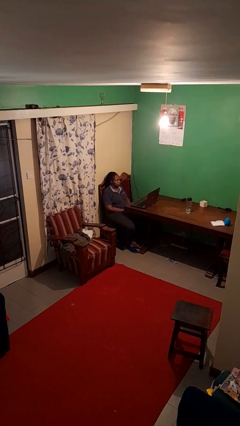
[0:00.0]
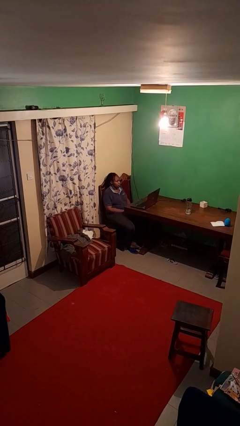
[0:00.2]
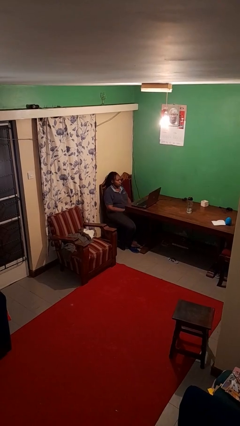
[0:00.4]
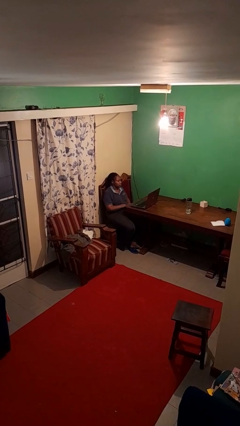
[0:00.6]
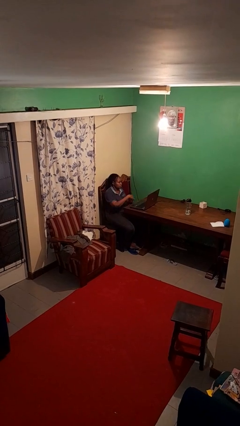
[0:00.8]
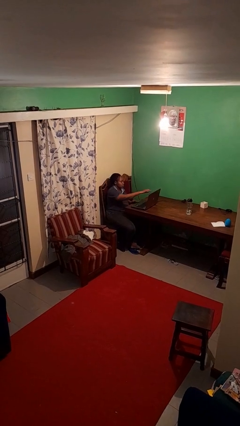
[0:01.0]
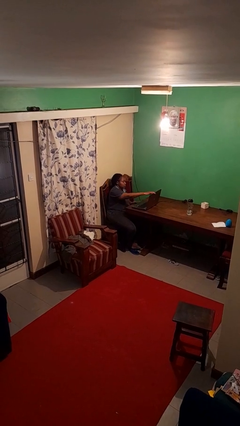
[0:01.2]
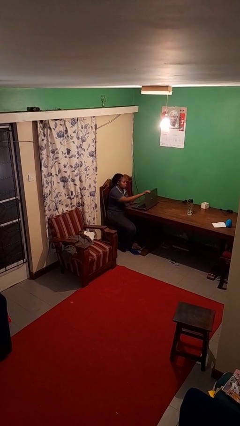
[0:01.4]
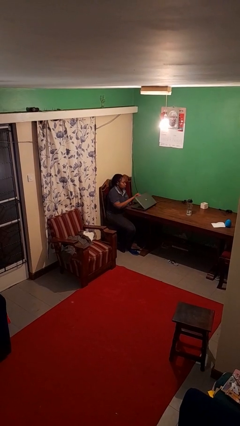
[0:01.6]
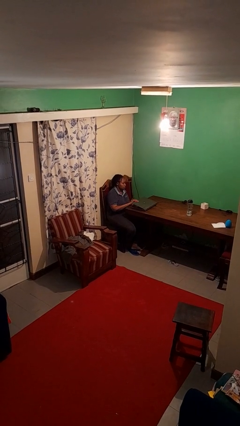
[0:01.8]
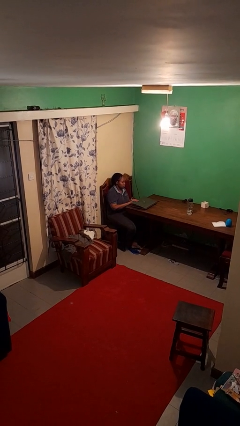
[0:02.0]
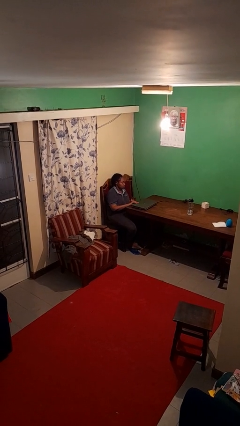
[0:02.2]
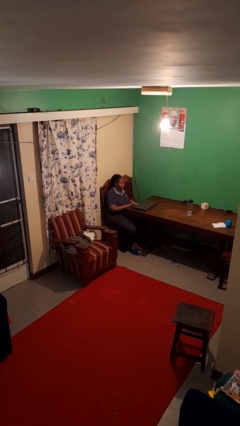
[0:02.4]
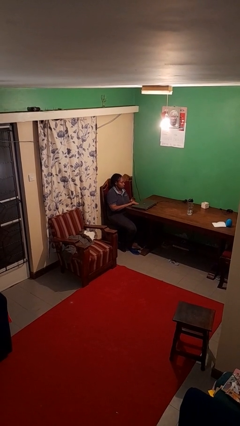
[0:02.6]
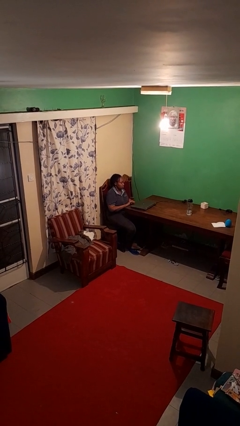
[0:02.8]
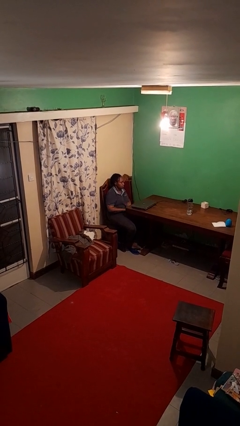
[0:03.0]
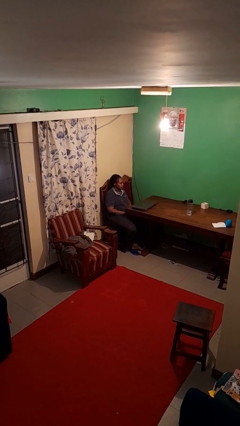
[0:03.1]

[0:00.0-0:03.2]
person closes laptop

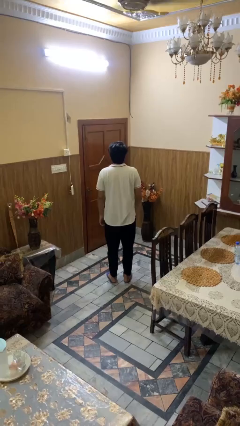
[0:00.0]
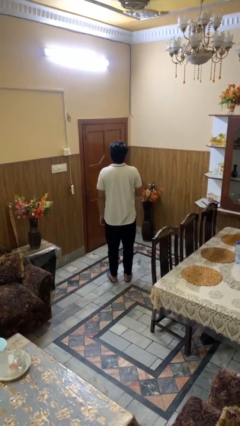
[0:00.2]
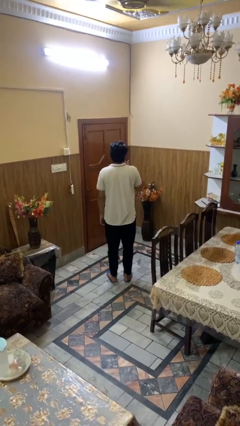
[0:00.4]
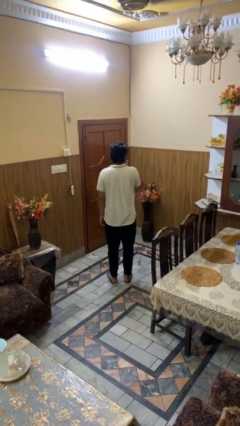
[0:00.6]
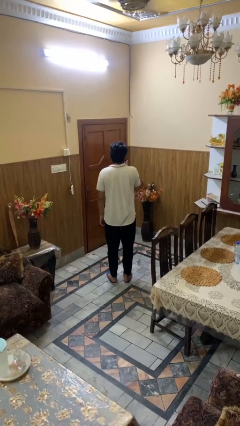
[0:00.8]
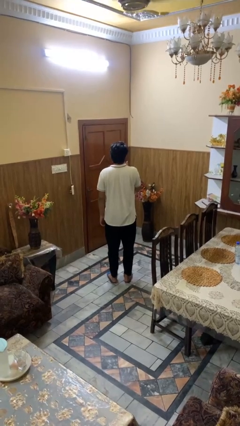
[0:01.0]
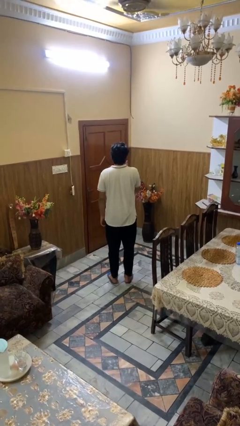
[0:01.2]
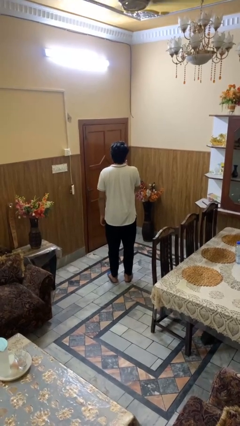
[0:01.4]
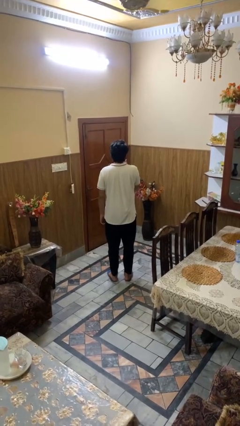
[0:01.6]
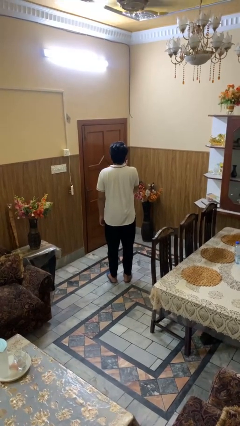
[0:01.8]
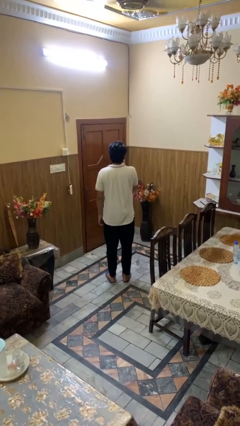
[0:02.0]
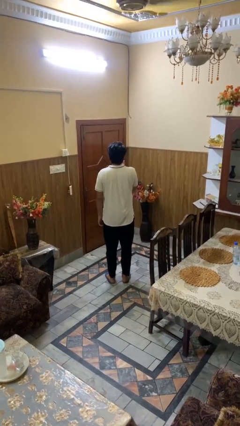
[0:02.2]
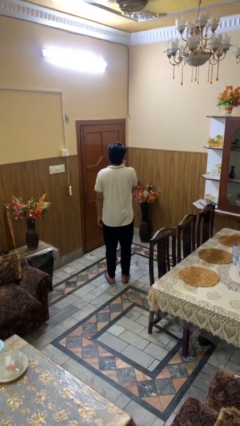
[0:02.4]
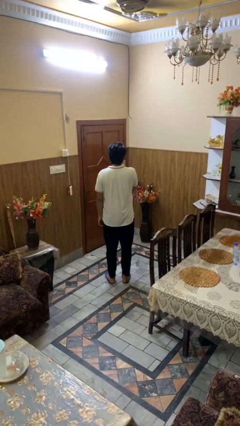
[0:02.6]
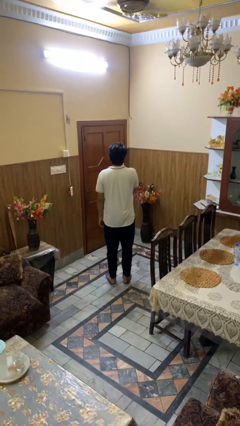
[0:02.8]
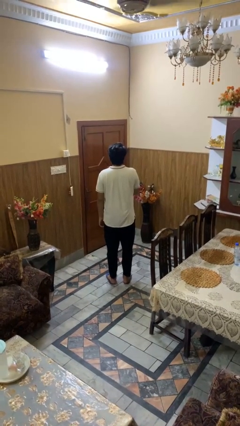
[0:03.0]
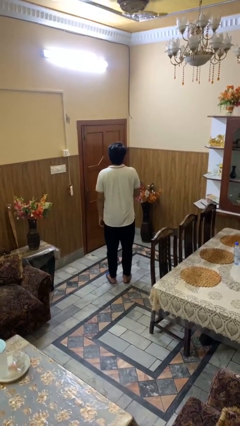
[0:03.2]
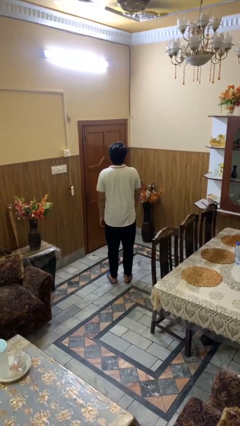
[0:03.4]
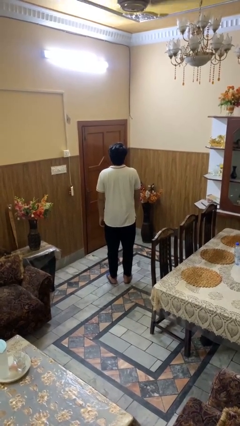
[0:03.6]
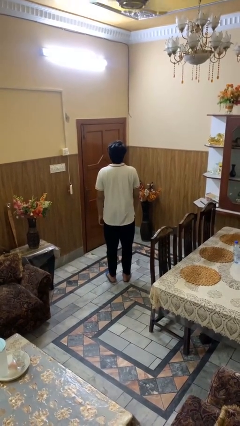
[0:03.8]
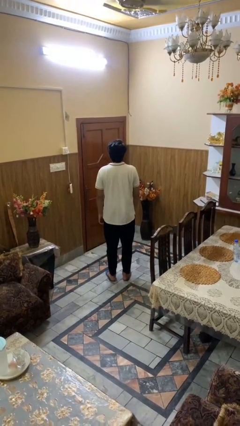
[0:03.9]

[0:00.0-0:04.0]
person licks fingers

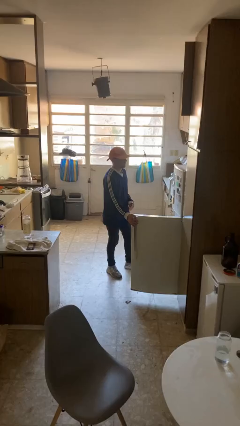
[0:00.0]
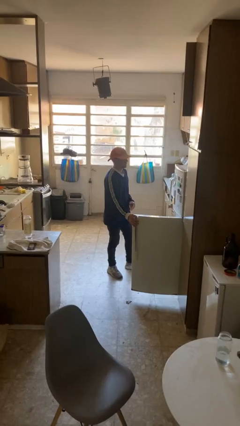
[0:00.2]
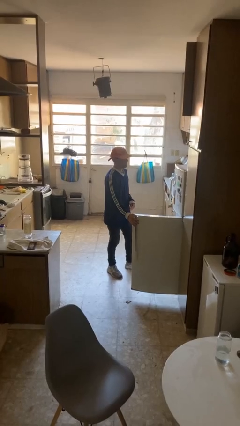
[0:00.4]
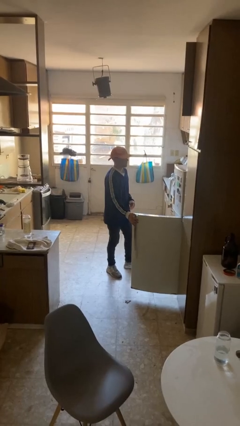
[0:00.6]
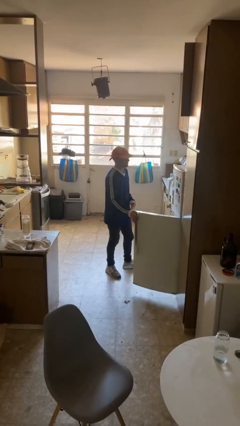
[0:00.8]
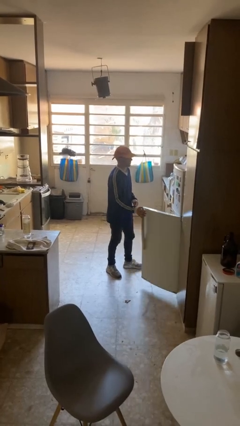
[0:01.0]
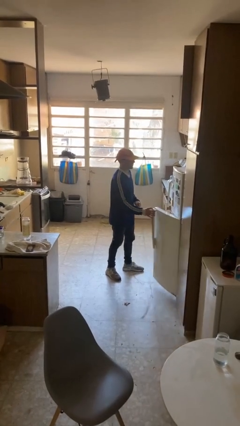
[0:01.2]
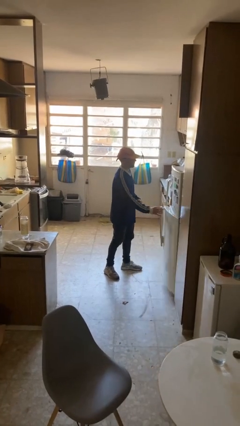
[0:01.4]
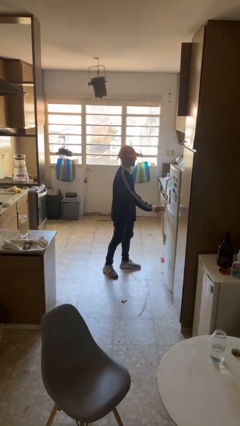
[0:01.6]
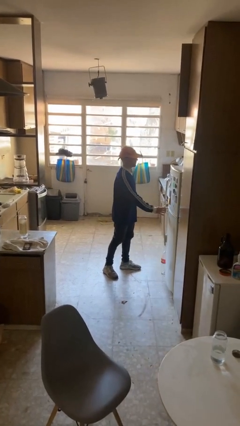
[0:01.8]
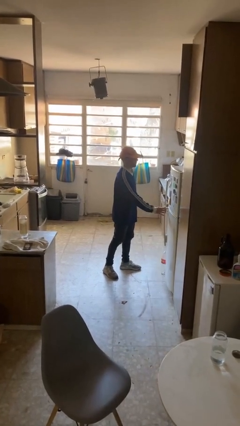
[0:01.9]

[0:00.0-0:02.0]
person closes refrigerator

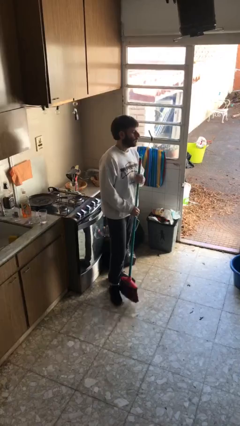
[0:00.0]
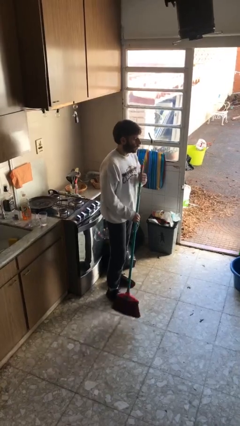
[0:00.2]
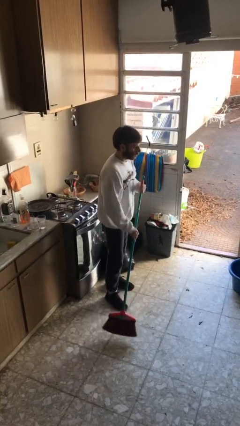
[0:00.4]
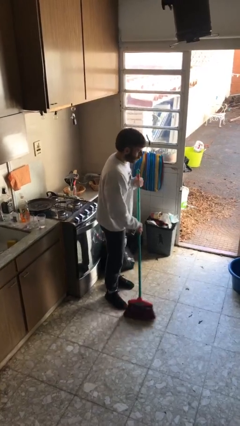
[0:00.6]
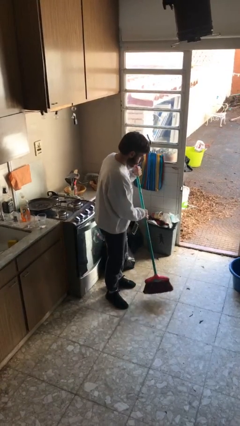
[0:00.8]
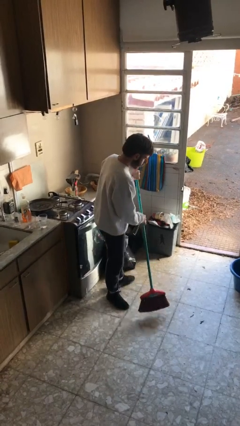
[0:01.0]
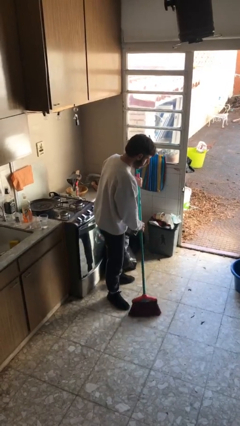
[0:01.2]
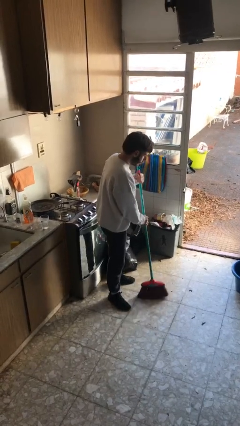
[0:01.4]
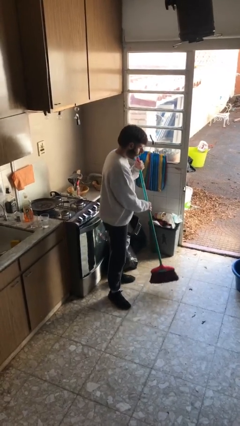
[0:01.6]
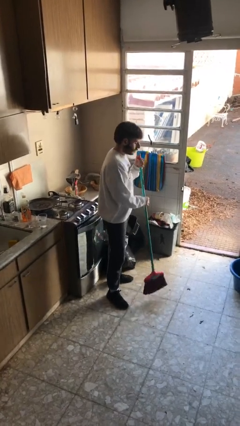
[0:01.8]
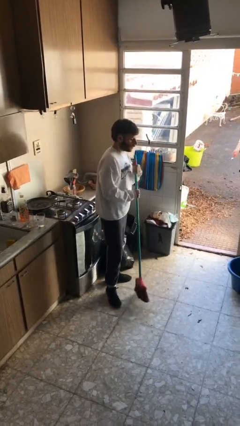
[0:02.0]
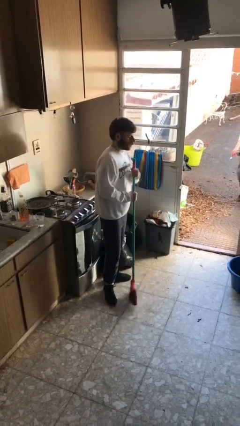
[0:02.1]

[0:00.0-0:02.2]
person sweeps floor

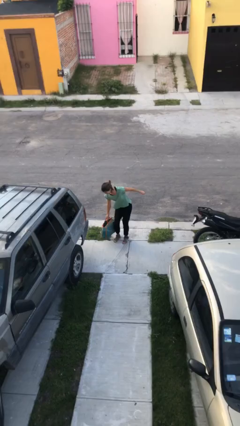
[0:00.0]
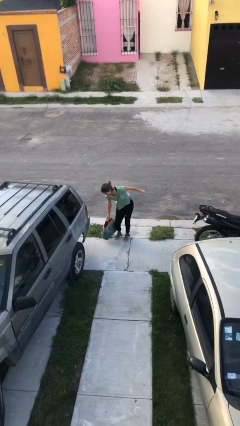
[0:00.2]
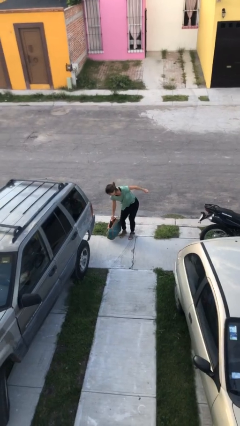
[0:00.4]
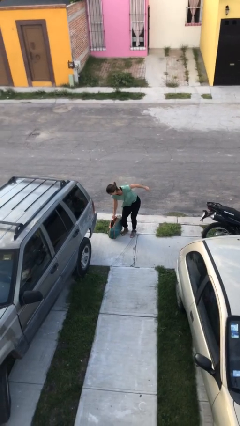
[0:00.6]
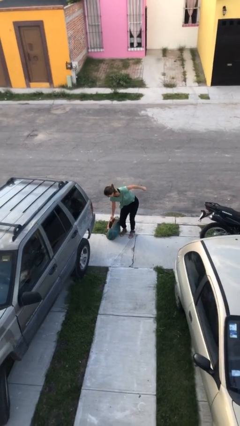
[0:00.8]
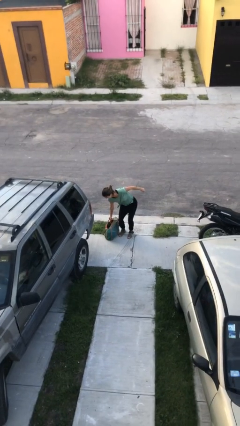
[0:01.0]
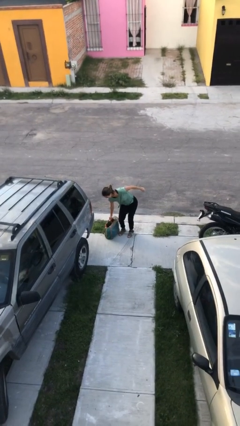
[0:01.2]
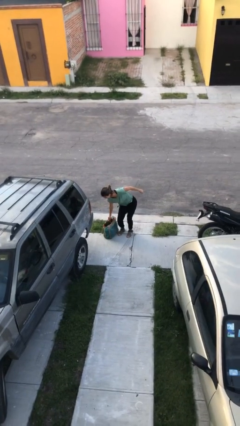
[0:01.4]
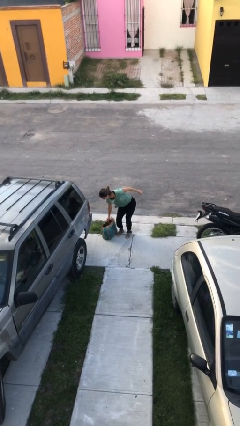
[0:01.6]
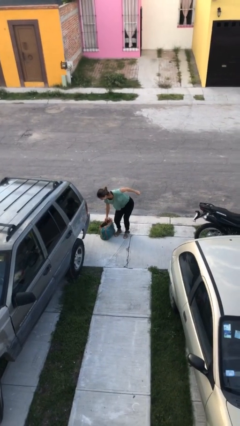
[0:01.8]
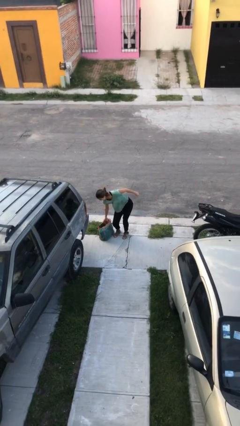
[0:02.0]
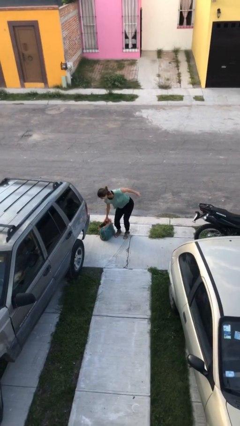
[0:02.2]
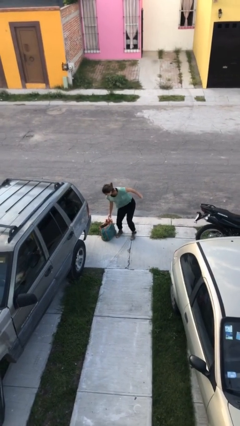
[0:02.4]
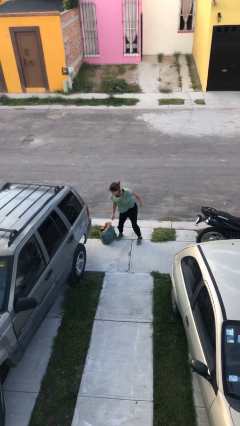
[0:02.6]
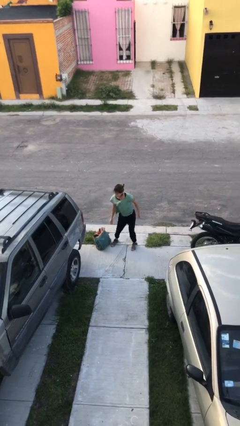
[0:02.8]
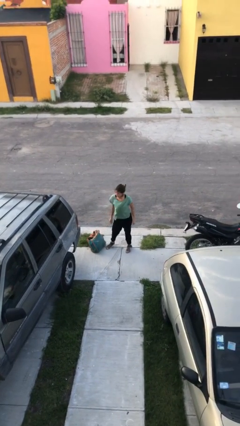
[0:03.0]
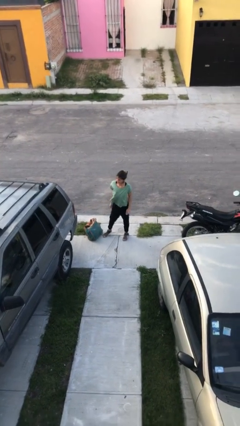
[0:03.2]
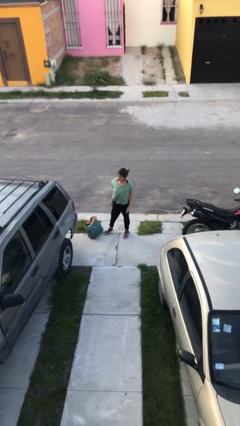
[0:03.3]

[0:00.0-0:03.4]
person puts down object on floor

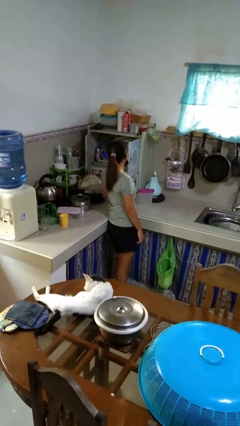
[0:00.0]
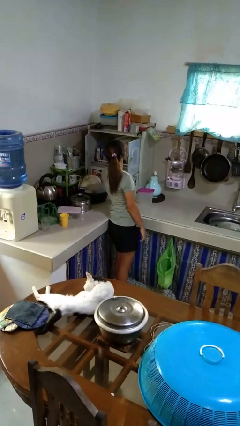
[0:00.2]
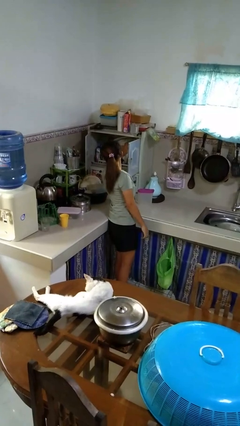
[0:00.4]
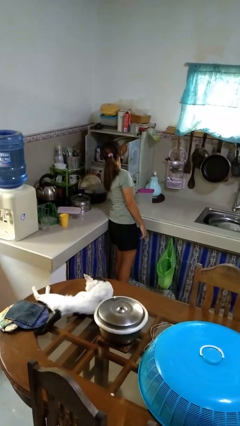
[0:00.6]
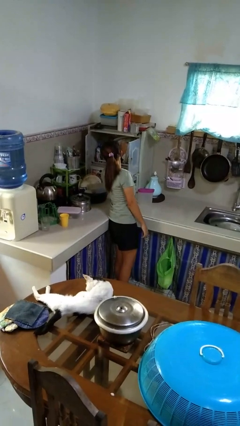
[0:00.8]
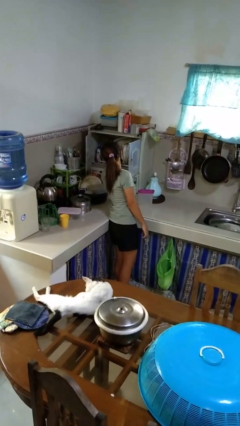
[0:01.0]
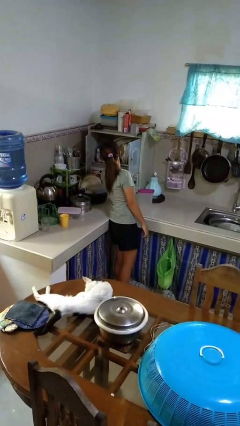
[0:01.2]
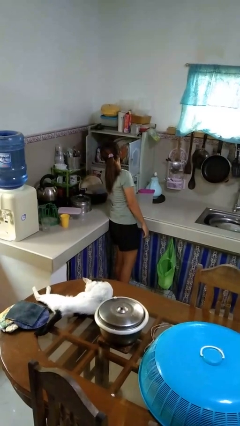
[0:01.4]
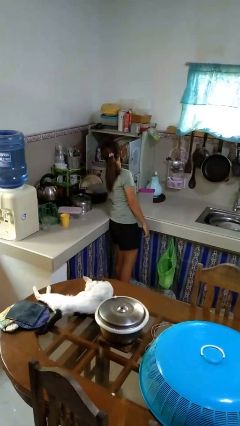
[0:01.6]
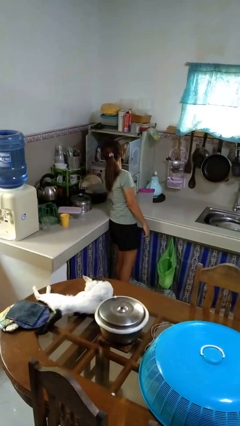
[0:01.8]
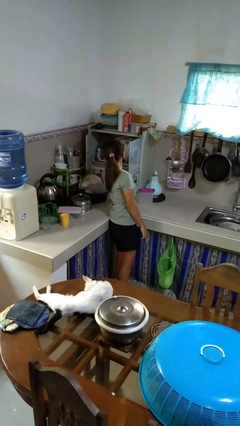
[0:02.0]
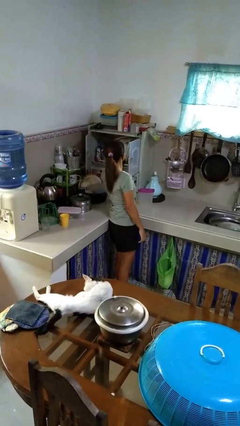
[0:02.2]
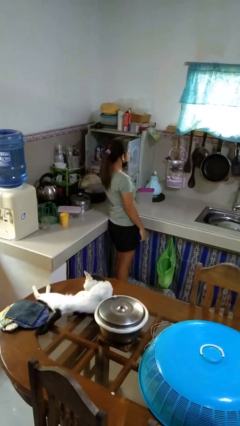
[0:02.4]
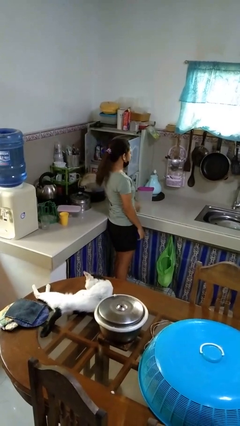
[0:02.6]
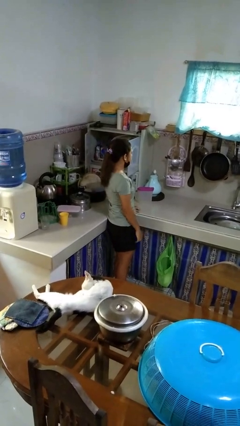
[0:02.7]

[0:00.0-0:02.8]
person searches in kitchen drawer

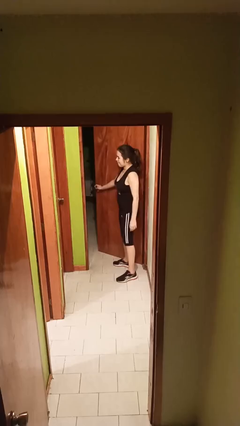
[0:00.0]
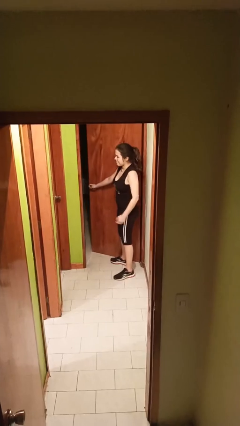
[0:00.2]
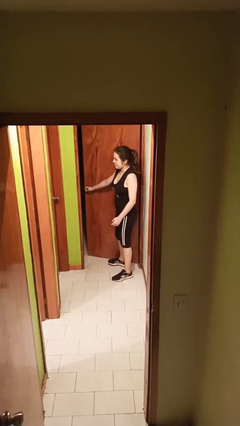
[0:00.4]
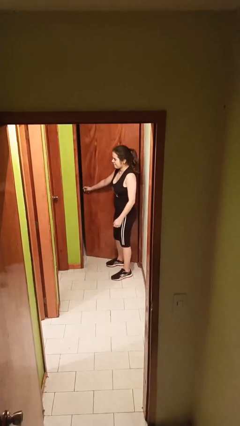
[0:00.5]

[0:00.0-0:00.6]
person closes facility door
